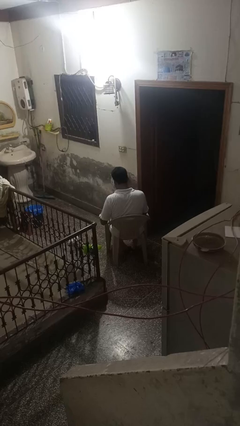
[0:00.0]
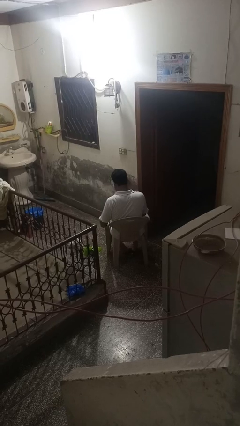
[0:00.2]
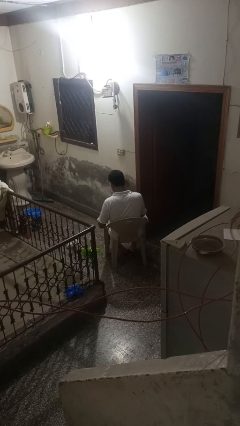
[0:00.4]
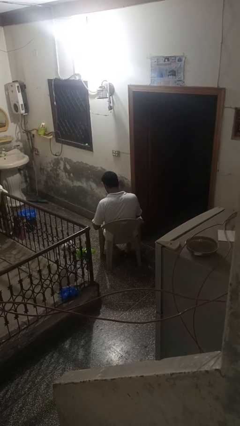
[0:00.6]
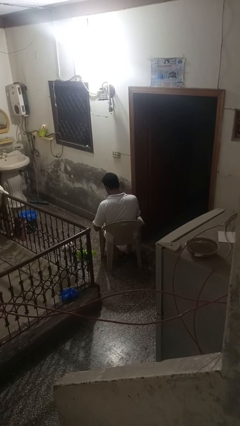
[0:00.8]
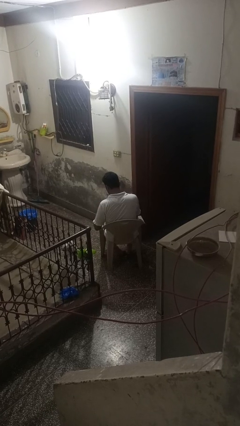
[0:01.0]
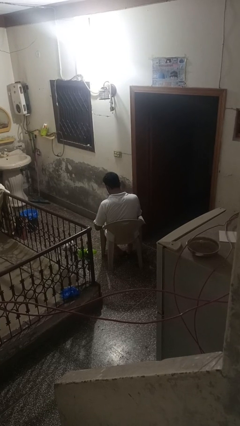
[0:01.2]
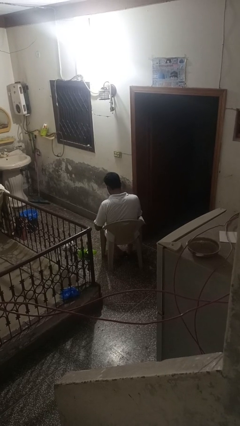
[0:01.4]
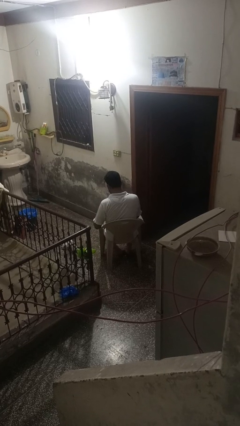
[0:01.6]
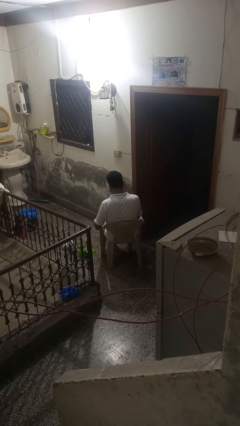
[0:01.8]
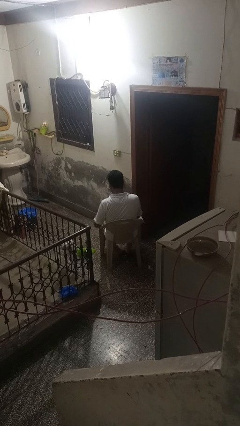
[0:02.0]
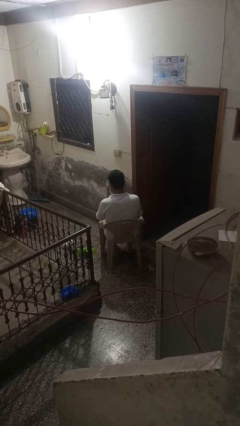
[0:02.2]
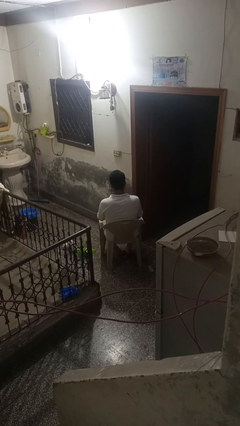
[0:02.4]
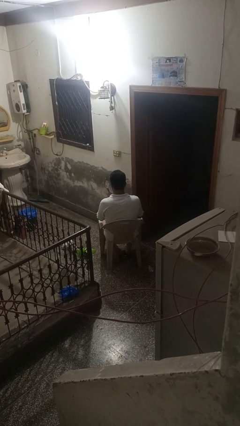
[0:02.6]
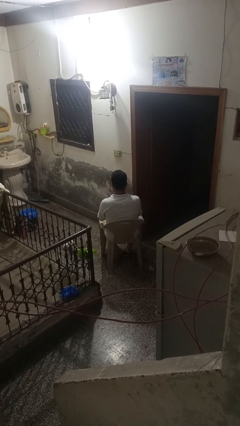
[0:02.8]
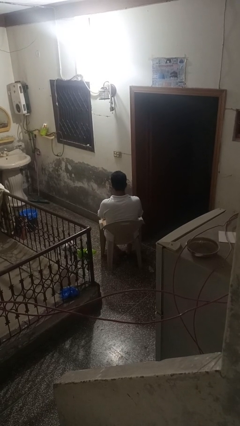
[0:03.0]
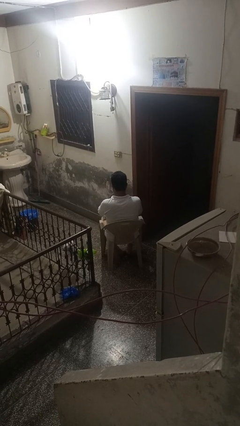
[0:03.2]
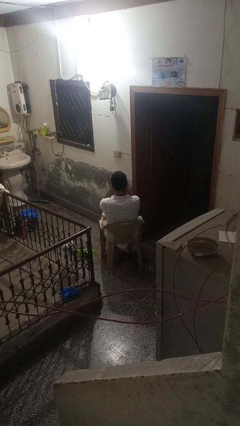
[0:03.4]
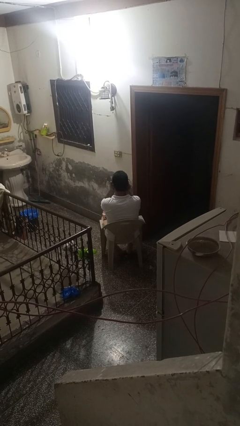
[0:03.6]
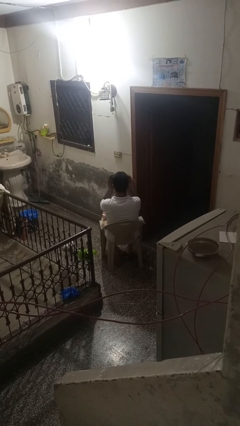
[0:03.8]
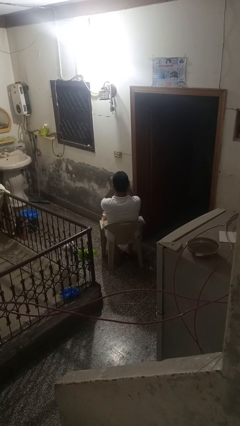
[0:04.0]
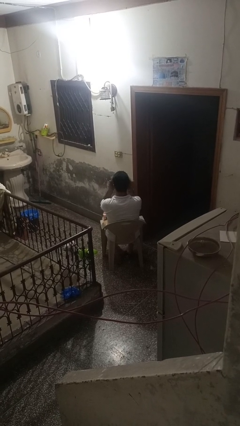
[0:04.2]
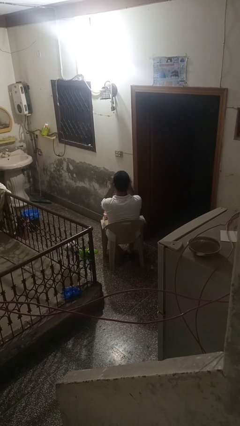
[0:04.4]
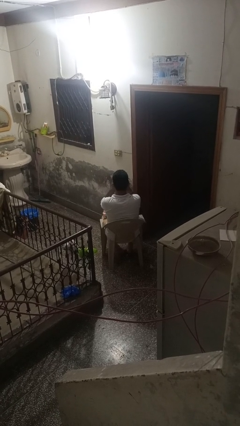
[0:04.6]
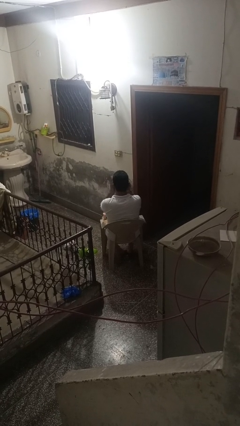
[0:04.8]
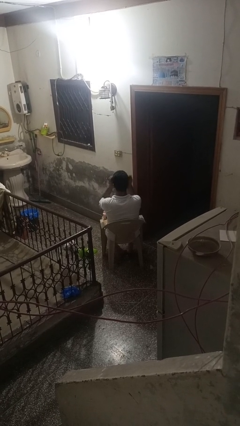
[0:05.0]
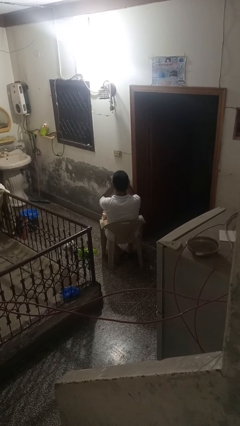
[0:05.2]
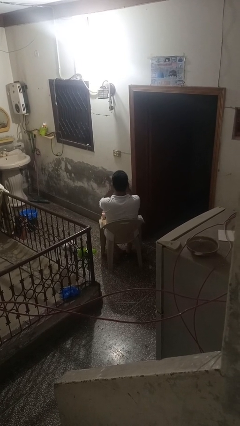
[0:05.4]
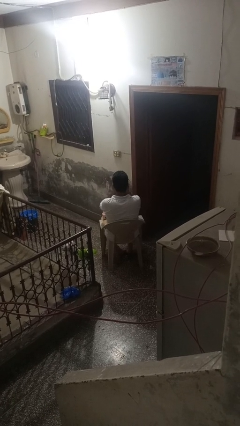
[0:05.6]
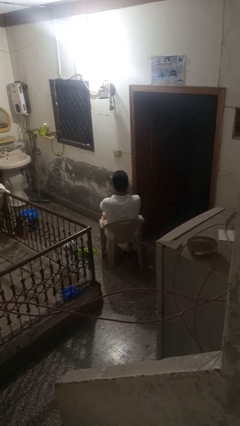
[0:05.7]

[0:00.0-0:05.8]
person washes hands

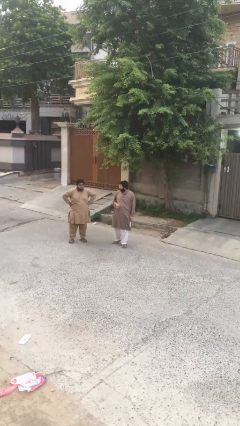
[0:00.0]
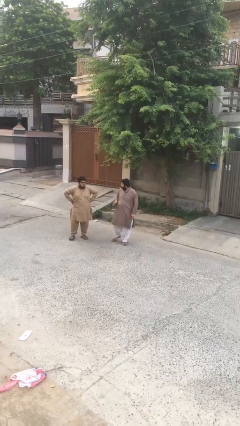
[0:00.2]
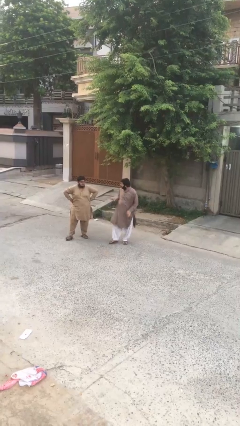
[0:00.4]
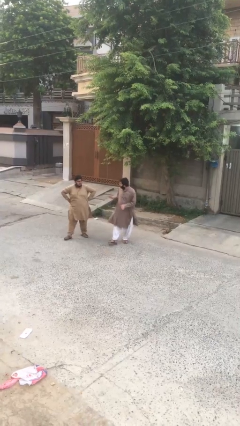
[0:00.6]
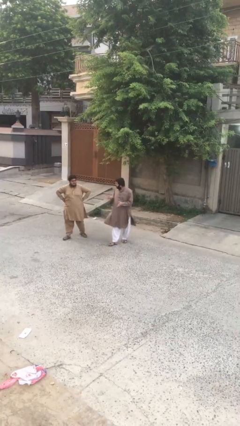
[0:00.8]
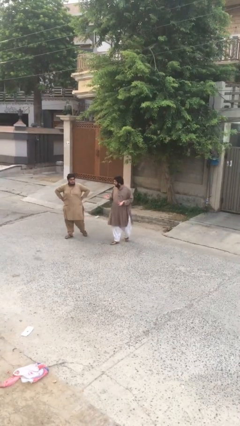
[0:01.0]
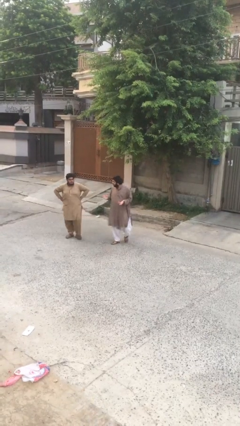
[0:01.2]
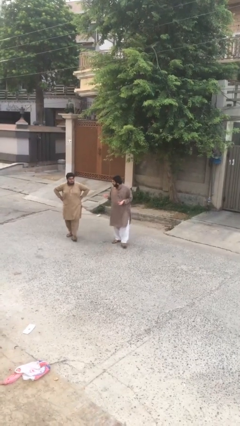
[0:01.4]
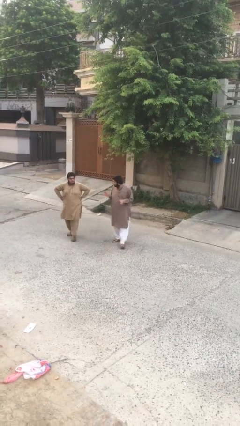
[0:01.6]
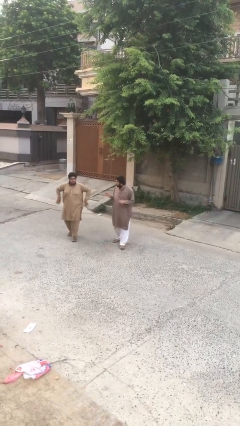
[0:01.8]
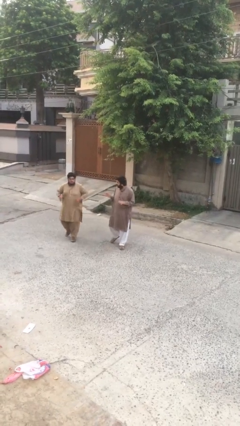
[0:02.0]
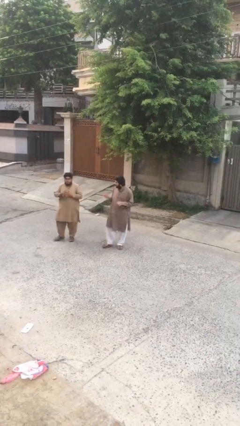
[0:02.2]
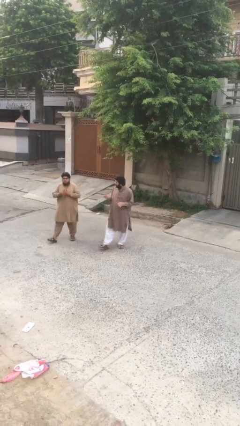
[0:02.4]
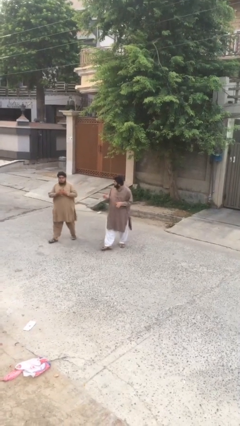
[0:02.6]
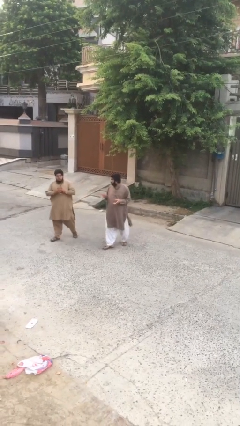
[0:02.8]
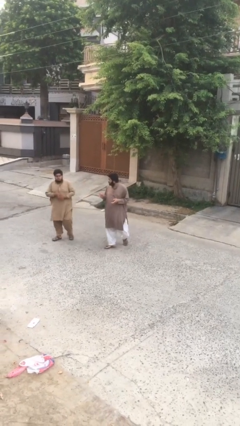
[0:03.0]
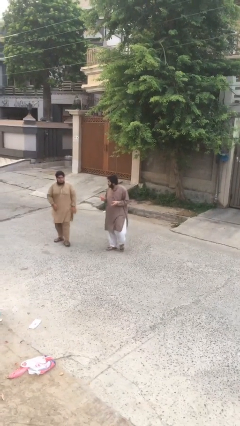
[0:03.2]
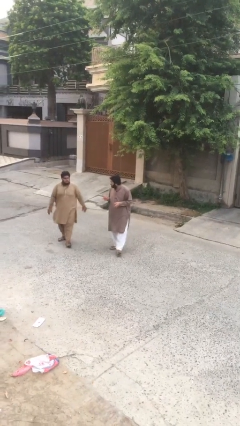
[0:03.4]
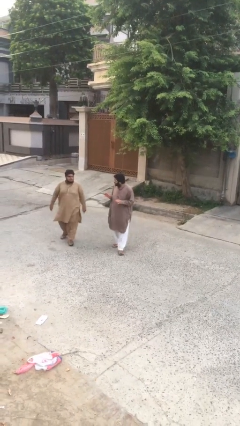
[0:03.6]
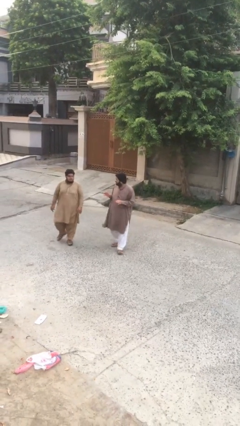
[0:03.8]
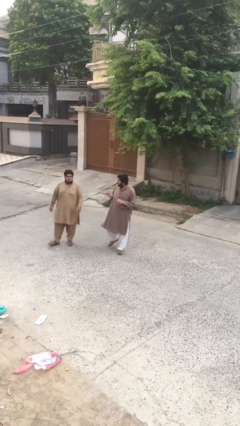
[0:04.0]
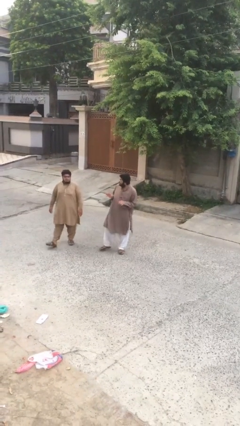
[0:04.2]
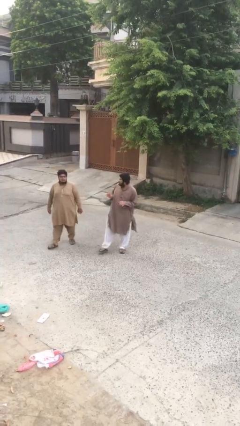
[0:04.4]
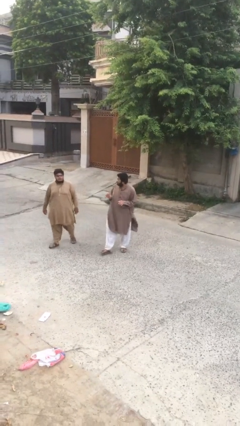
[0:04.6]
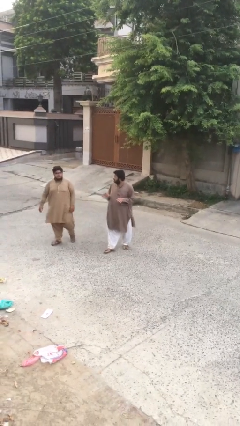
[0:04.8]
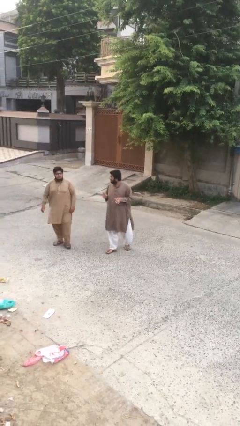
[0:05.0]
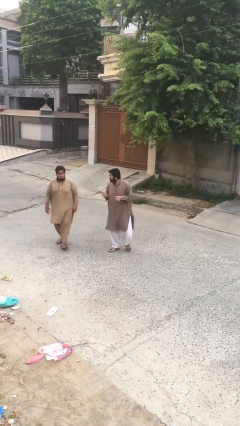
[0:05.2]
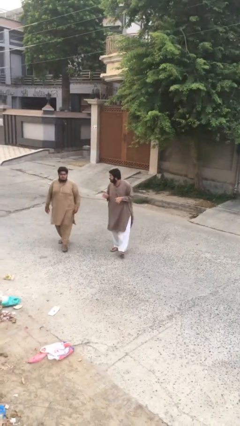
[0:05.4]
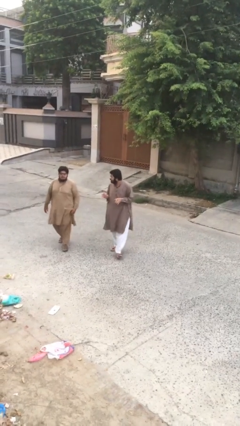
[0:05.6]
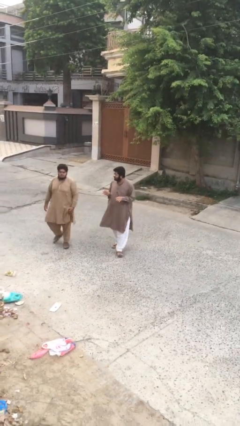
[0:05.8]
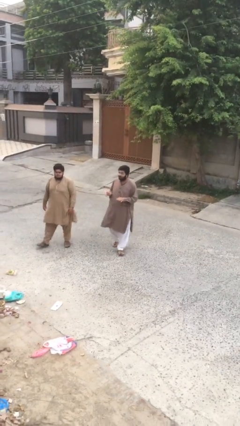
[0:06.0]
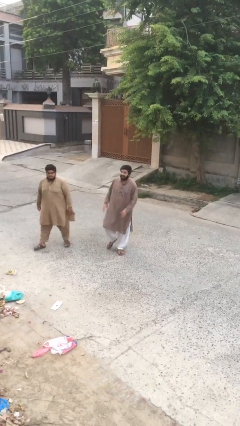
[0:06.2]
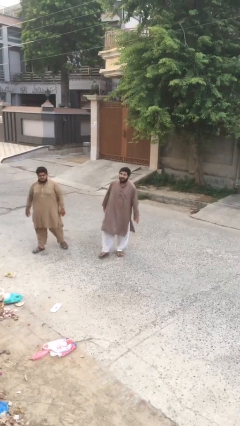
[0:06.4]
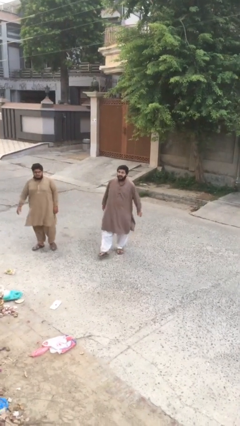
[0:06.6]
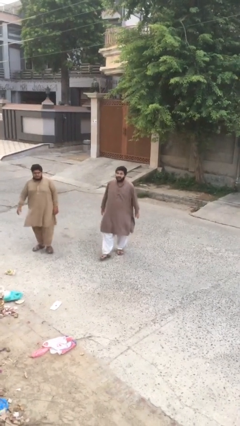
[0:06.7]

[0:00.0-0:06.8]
person talks to person

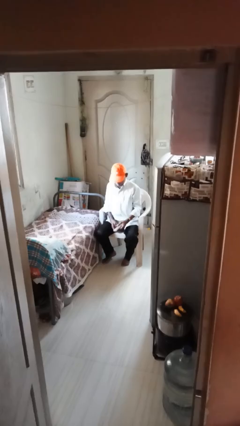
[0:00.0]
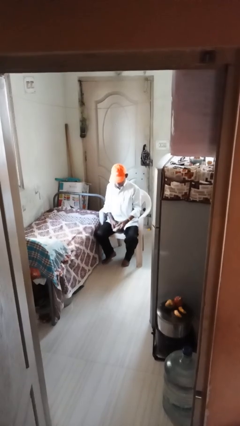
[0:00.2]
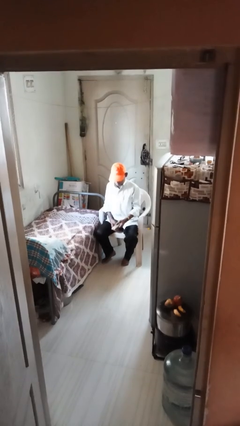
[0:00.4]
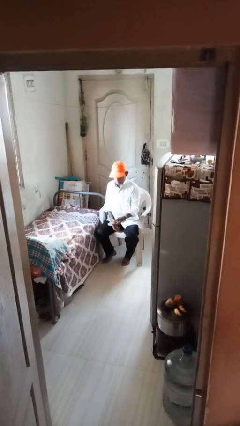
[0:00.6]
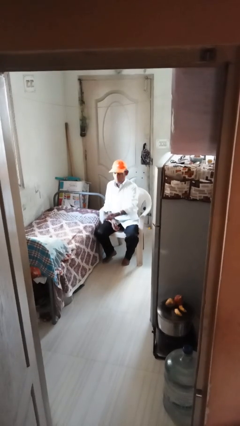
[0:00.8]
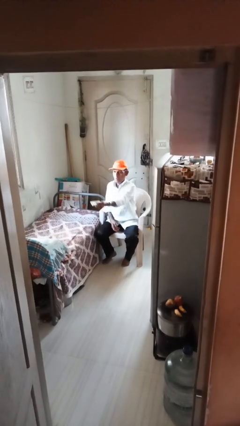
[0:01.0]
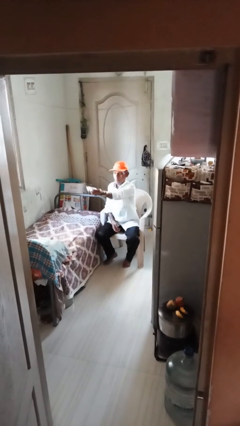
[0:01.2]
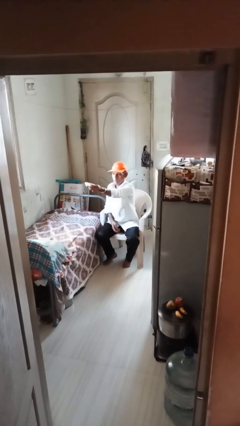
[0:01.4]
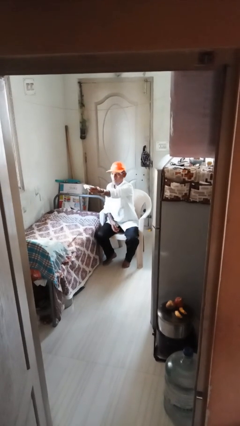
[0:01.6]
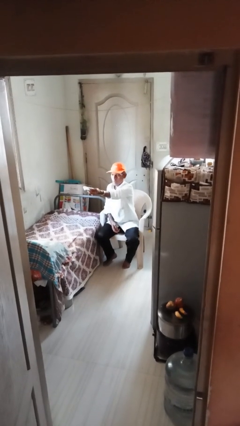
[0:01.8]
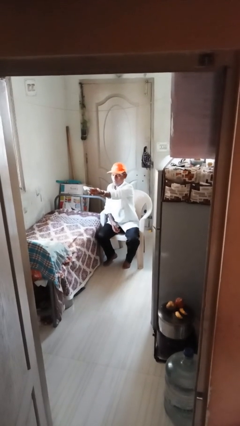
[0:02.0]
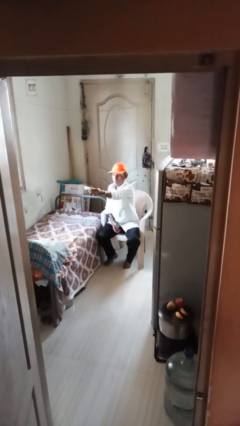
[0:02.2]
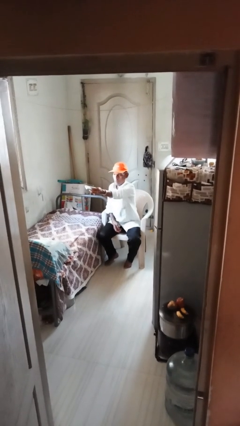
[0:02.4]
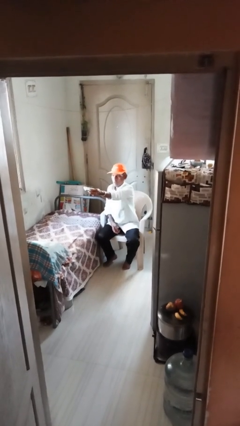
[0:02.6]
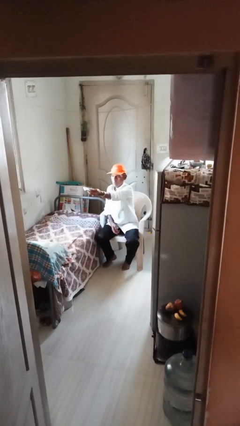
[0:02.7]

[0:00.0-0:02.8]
person uses television remote

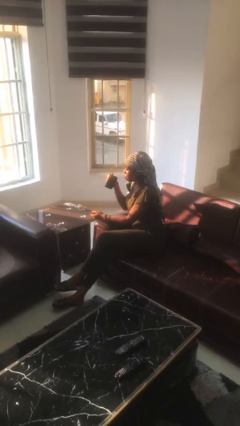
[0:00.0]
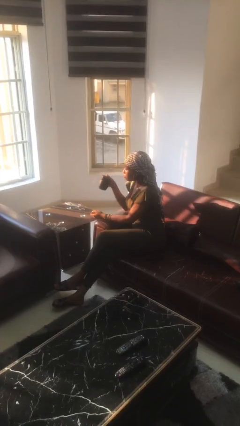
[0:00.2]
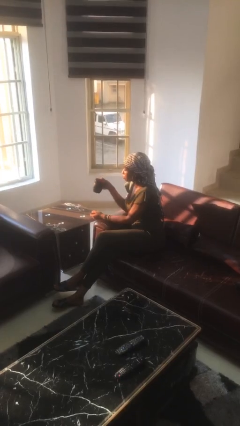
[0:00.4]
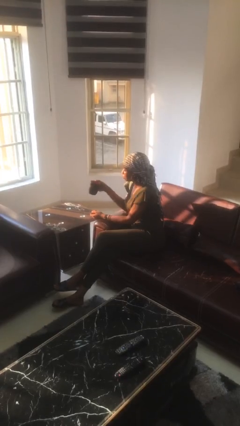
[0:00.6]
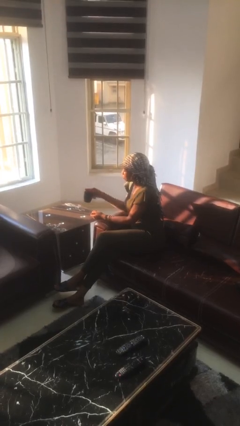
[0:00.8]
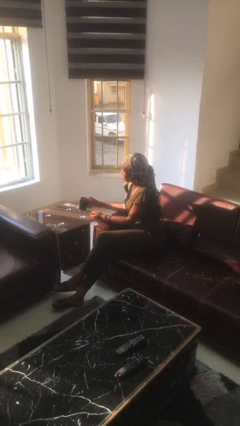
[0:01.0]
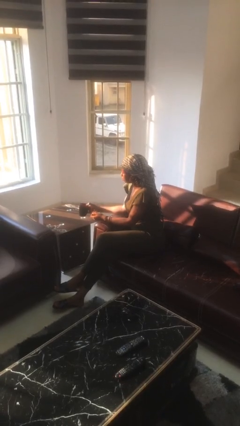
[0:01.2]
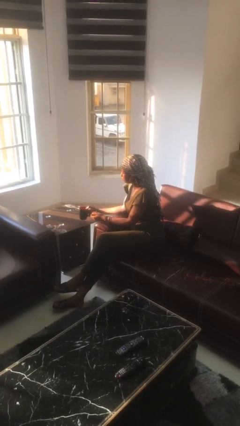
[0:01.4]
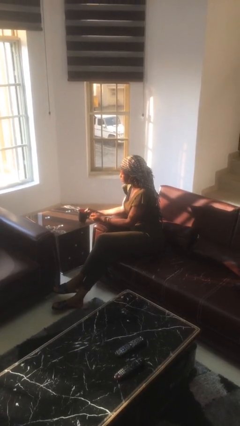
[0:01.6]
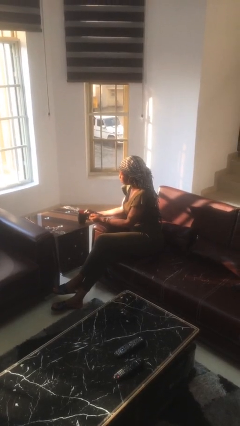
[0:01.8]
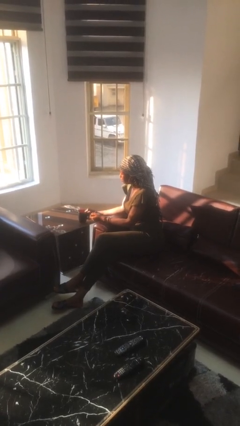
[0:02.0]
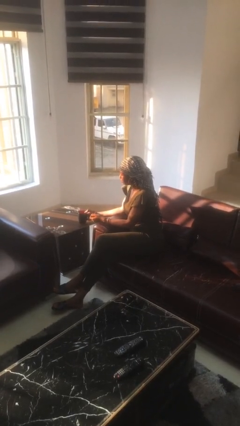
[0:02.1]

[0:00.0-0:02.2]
person puts down object on table
